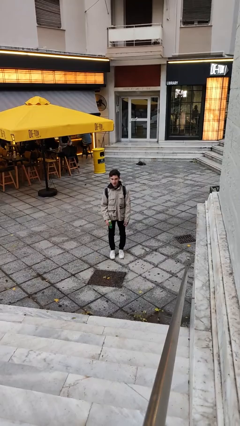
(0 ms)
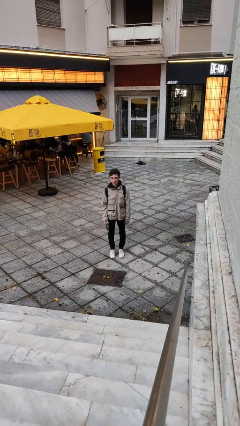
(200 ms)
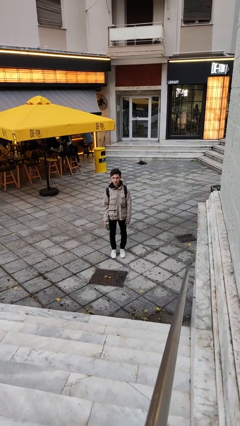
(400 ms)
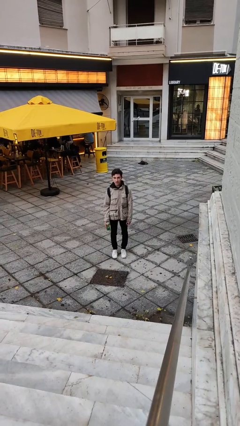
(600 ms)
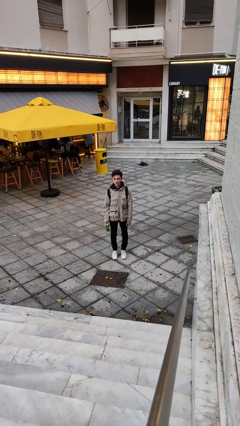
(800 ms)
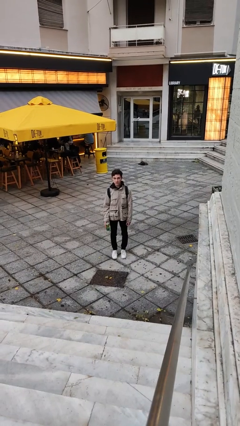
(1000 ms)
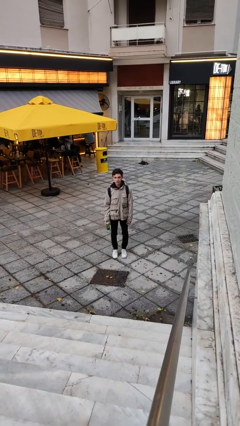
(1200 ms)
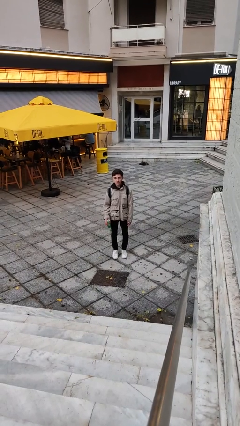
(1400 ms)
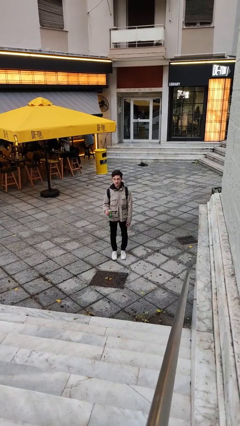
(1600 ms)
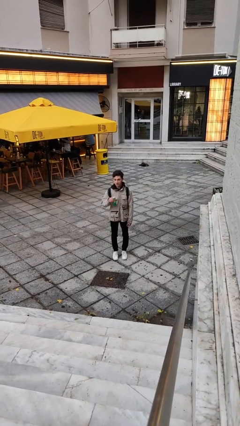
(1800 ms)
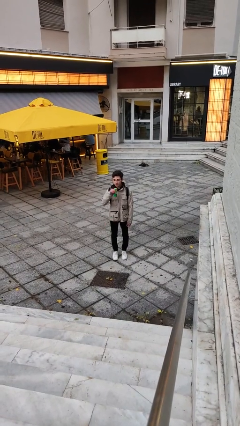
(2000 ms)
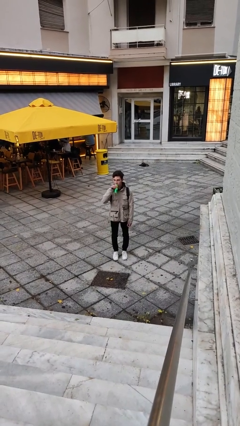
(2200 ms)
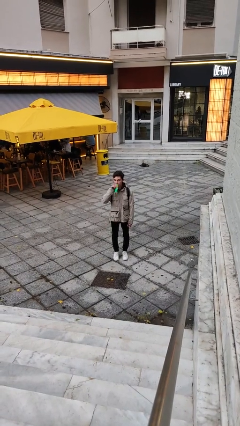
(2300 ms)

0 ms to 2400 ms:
person opens beverage can

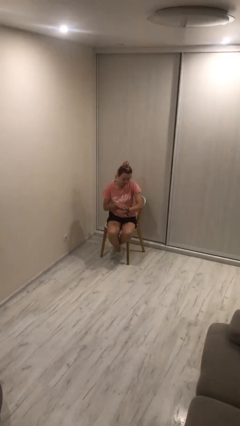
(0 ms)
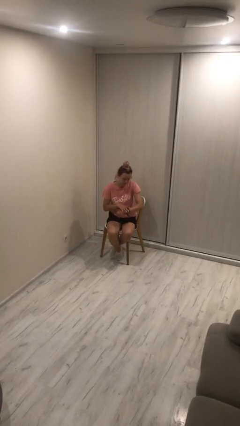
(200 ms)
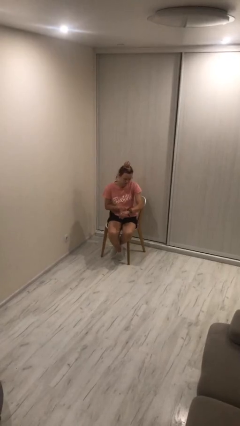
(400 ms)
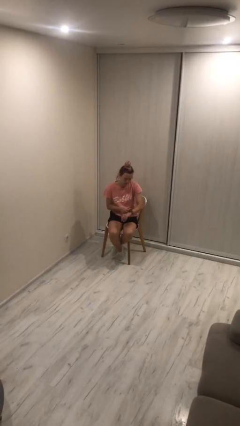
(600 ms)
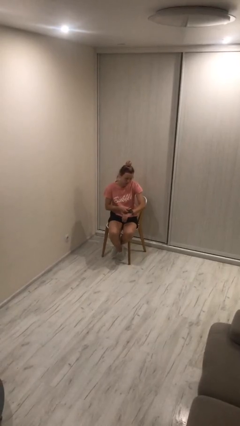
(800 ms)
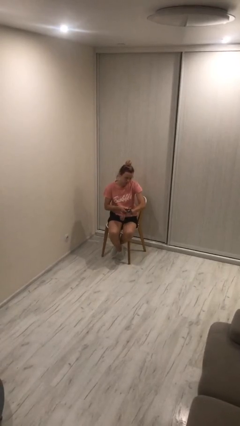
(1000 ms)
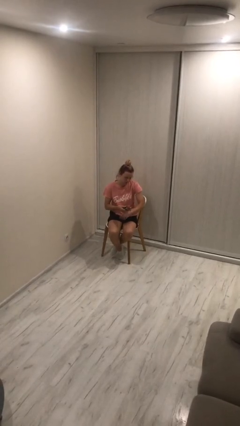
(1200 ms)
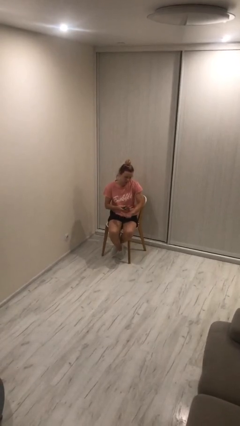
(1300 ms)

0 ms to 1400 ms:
person takes off wristwatch

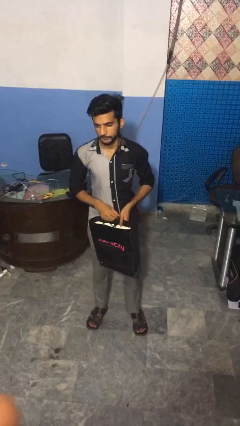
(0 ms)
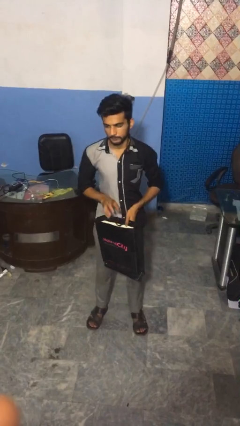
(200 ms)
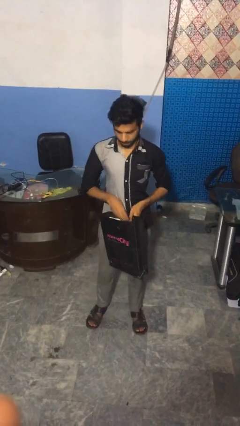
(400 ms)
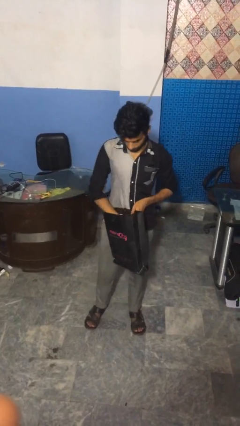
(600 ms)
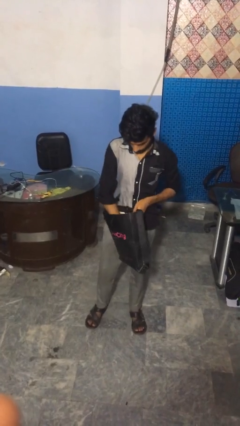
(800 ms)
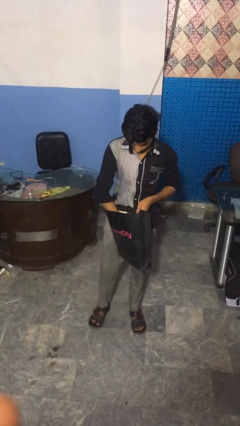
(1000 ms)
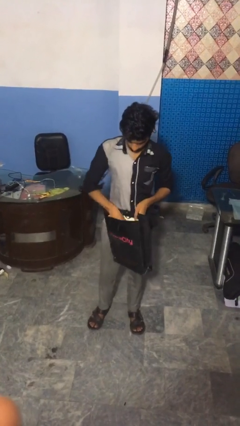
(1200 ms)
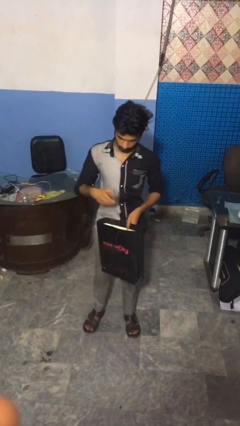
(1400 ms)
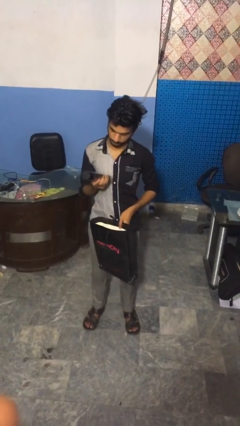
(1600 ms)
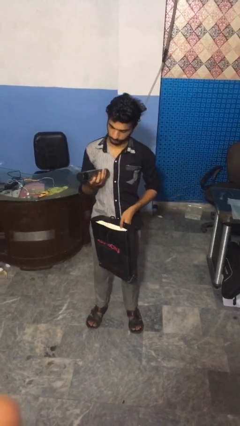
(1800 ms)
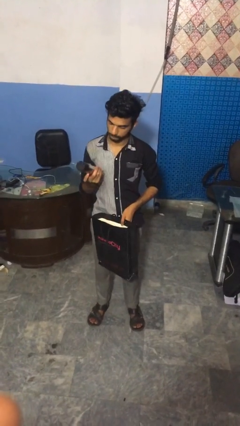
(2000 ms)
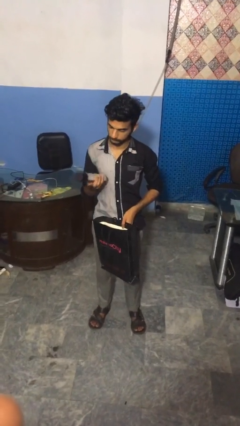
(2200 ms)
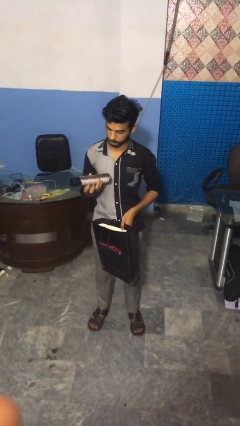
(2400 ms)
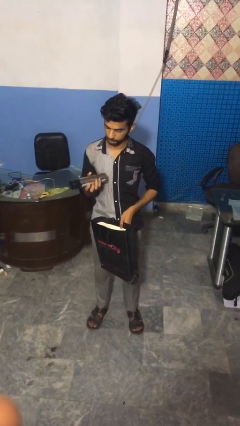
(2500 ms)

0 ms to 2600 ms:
person takes object from bag

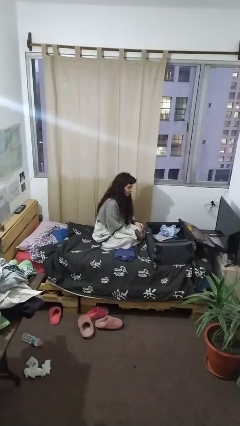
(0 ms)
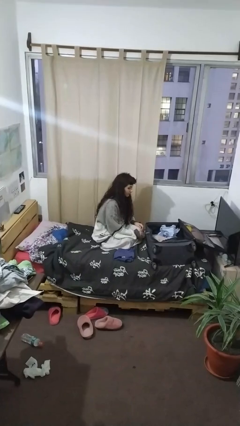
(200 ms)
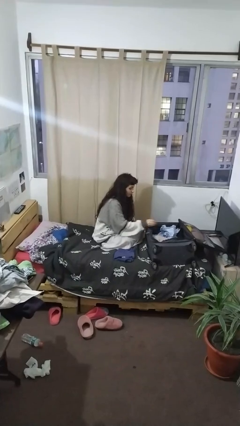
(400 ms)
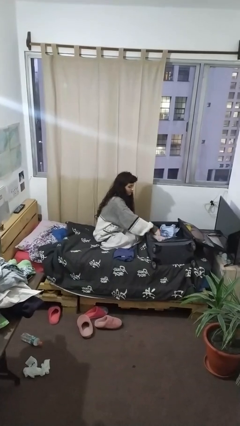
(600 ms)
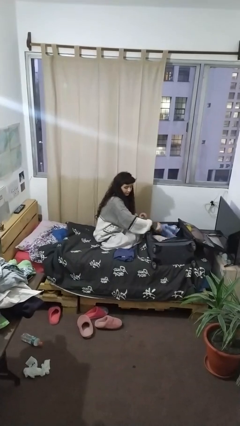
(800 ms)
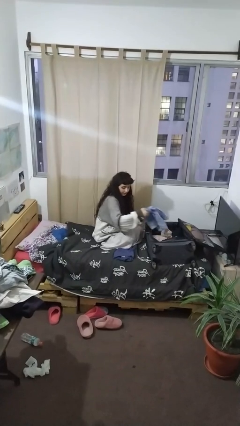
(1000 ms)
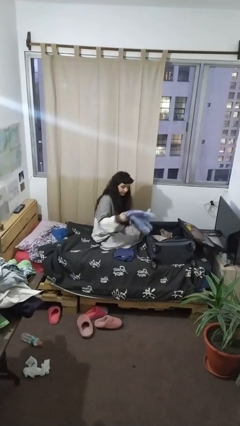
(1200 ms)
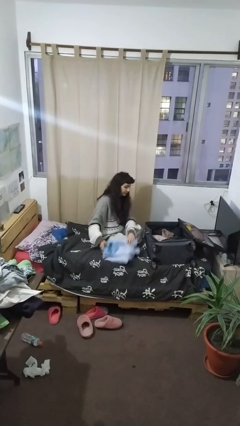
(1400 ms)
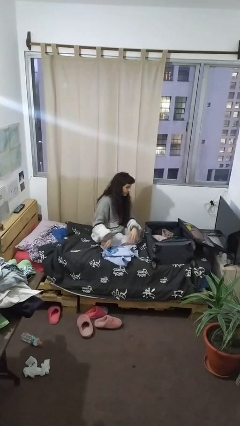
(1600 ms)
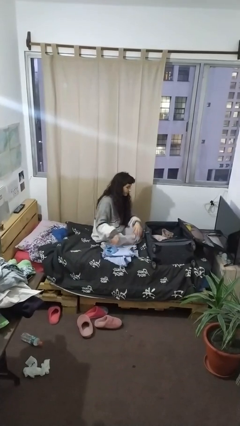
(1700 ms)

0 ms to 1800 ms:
person unloads clothes from suitcase

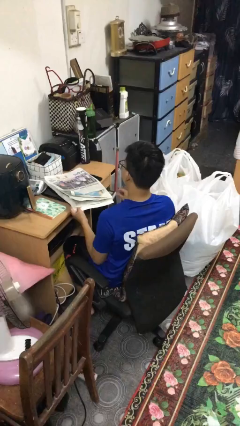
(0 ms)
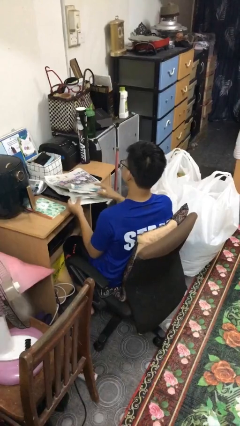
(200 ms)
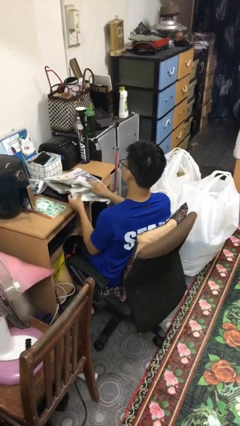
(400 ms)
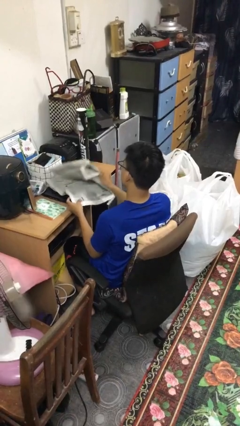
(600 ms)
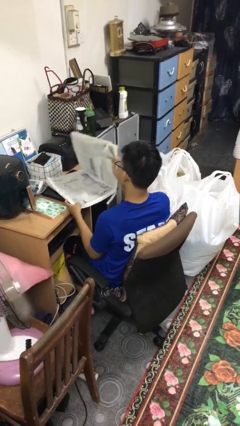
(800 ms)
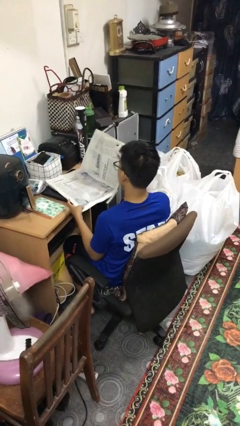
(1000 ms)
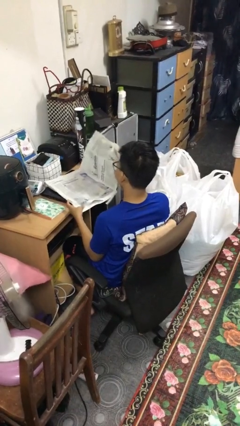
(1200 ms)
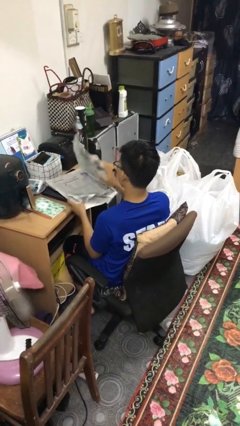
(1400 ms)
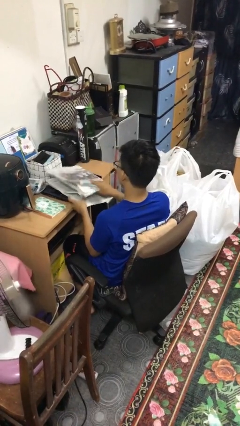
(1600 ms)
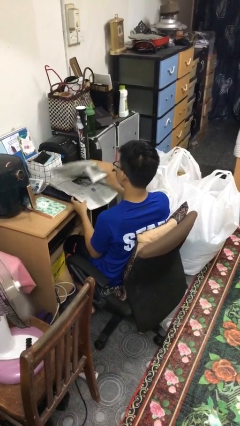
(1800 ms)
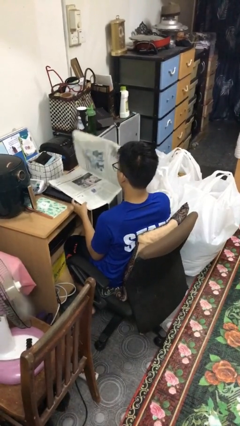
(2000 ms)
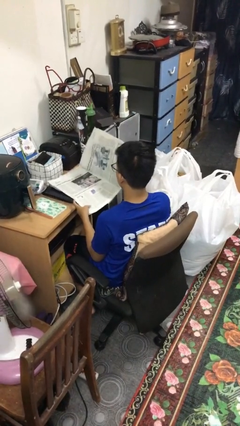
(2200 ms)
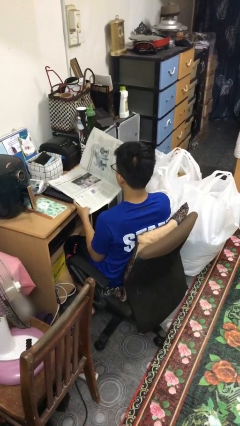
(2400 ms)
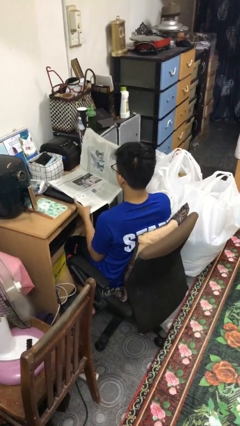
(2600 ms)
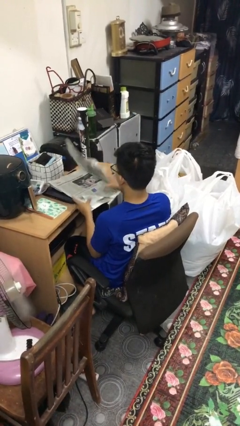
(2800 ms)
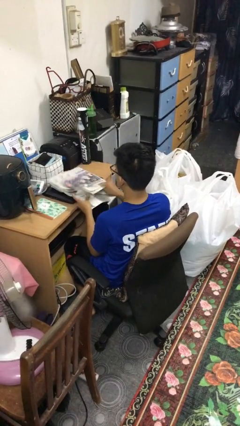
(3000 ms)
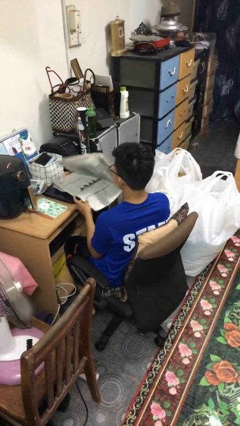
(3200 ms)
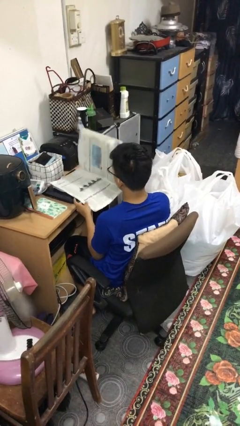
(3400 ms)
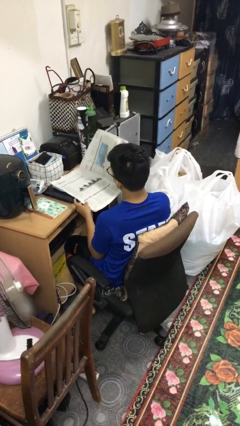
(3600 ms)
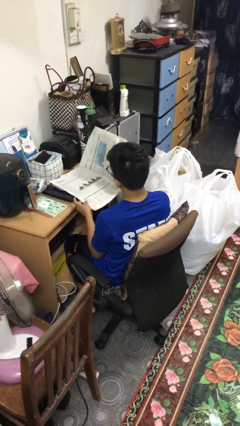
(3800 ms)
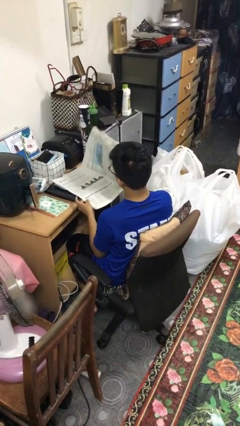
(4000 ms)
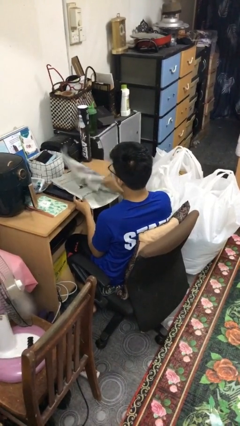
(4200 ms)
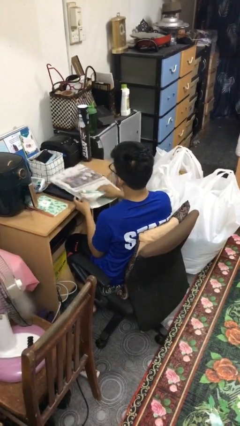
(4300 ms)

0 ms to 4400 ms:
person reads newspaper

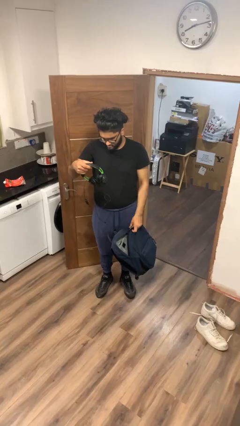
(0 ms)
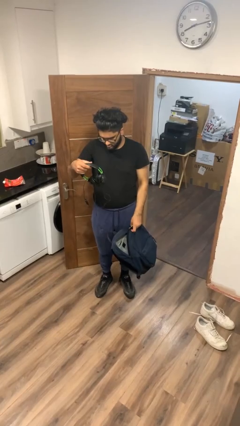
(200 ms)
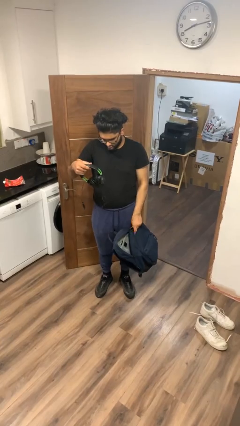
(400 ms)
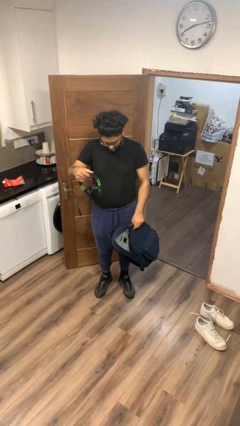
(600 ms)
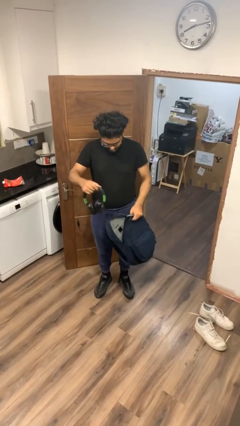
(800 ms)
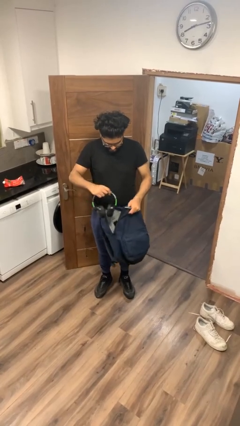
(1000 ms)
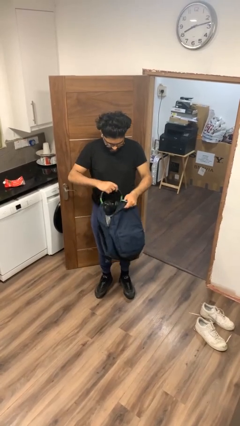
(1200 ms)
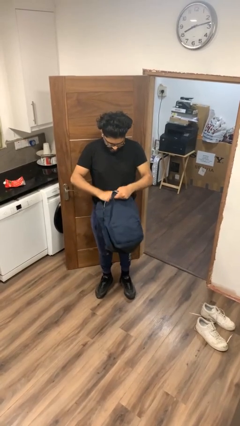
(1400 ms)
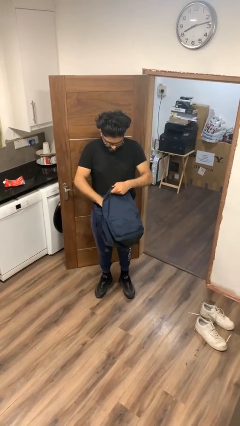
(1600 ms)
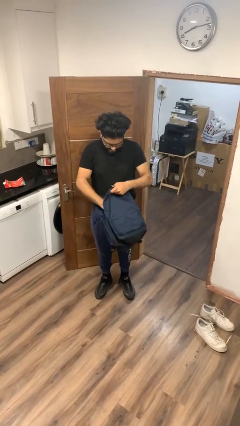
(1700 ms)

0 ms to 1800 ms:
person puts object into backpack

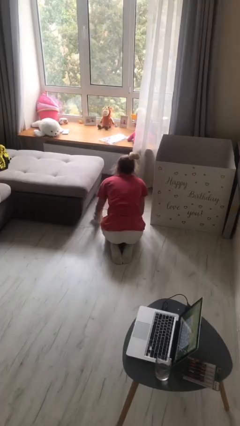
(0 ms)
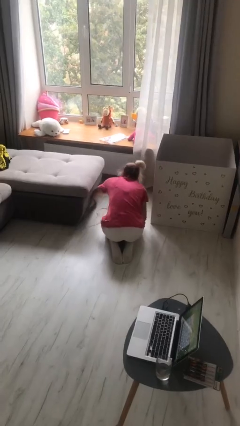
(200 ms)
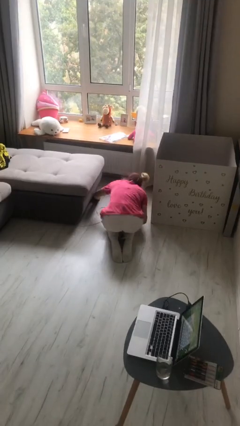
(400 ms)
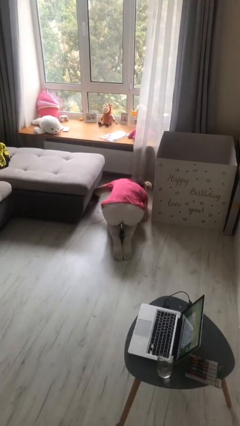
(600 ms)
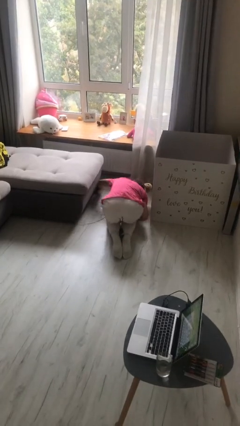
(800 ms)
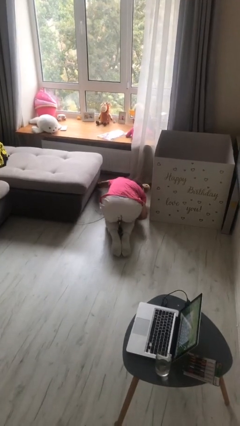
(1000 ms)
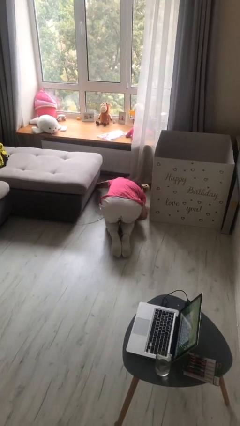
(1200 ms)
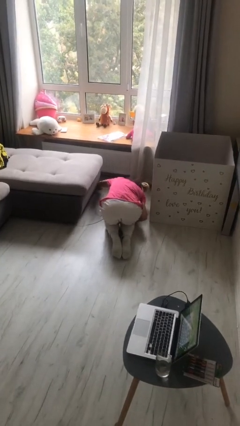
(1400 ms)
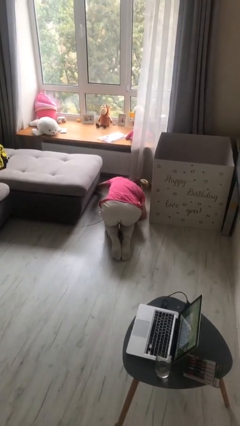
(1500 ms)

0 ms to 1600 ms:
person searches under couch

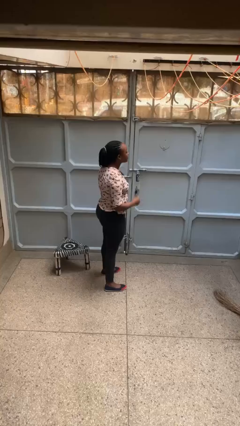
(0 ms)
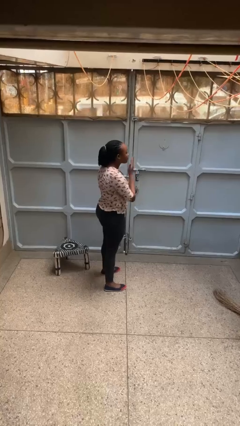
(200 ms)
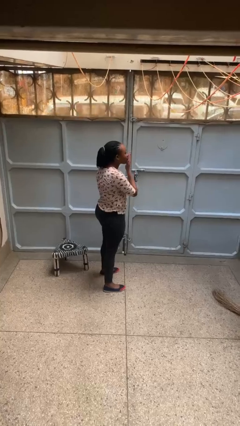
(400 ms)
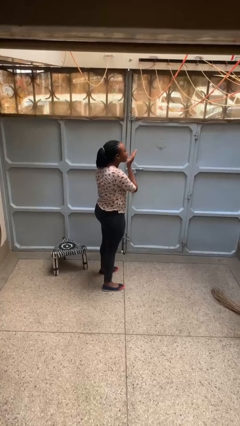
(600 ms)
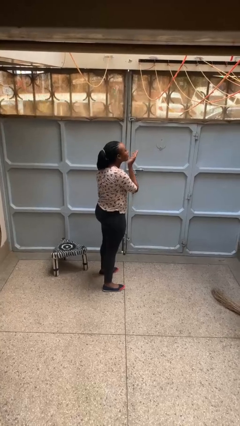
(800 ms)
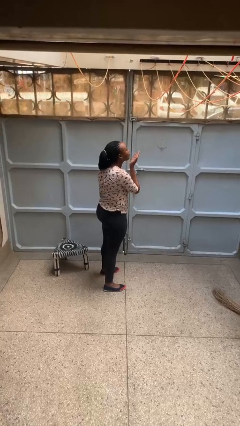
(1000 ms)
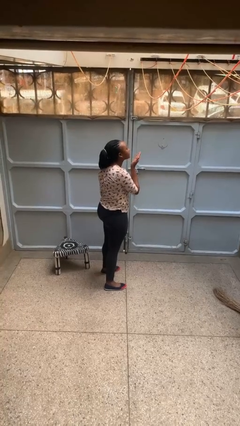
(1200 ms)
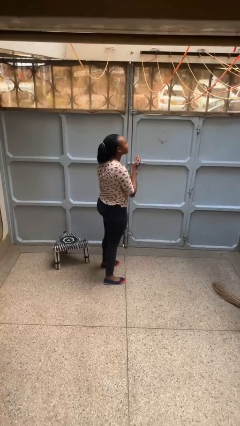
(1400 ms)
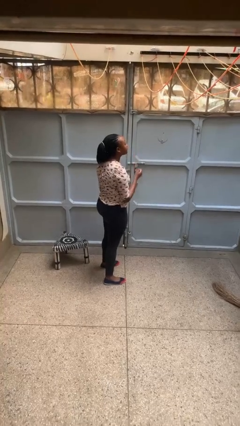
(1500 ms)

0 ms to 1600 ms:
person gestures blow kiss
